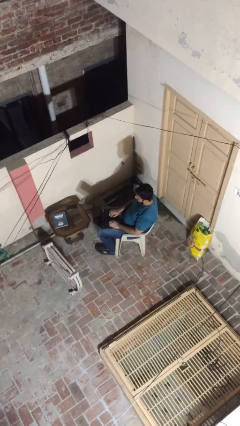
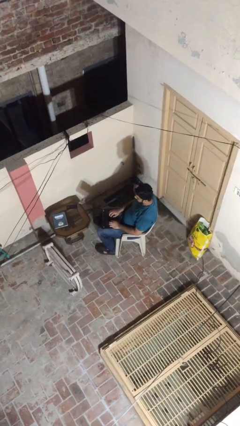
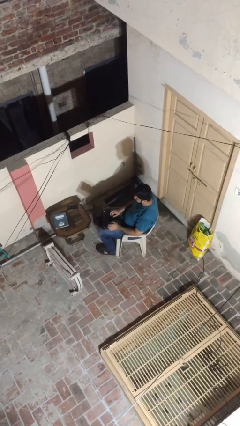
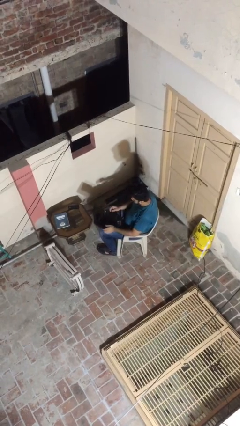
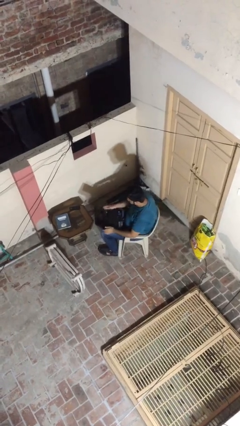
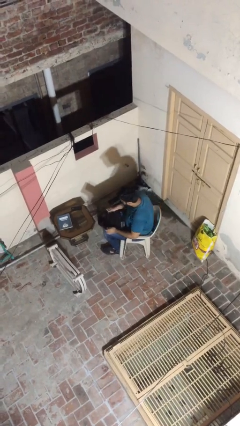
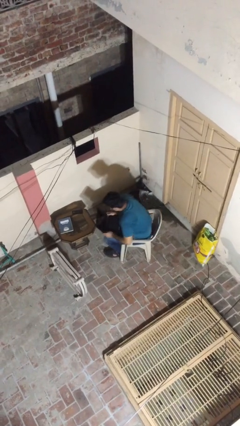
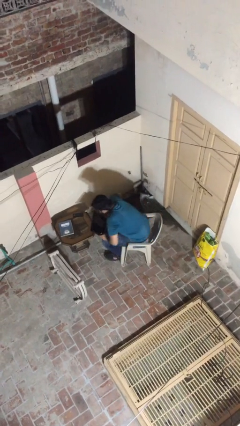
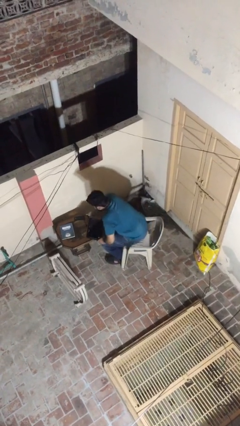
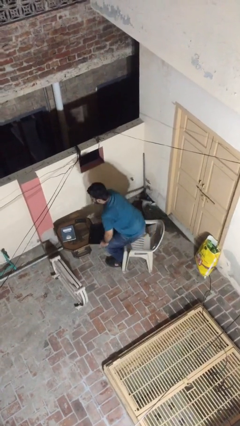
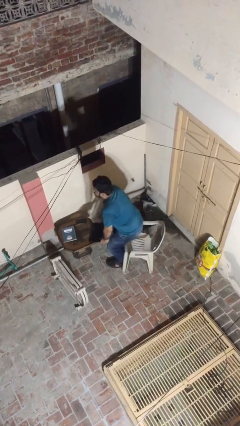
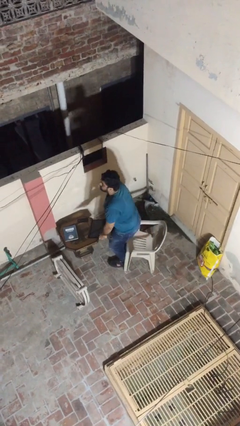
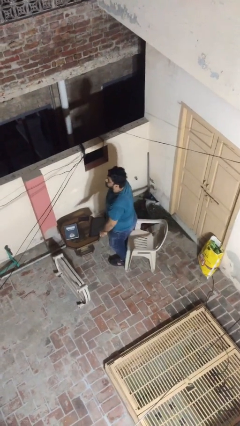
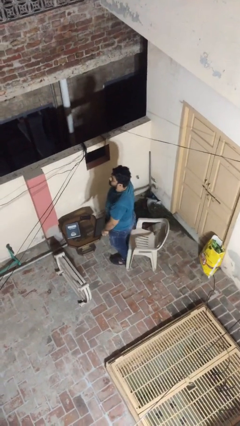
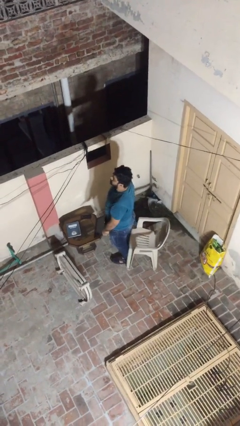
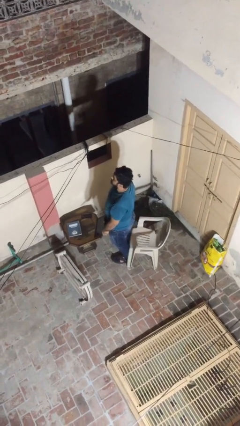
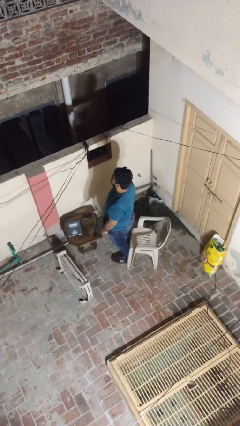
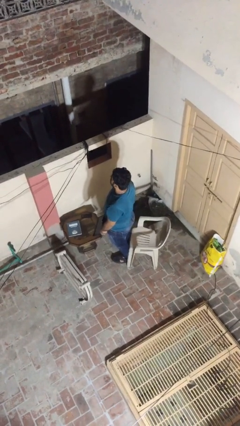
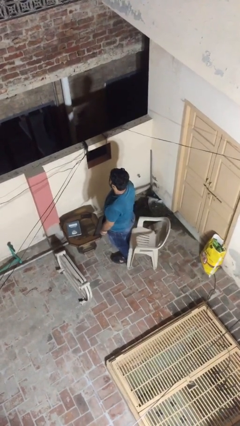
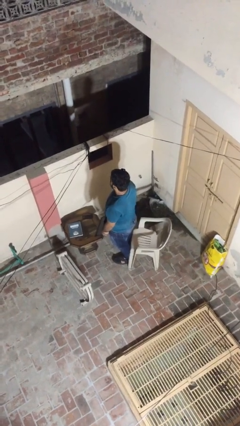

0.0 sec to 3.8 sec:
person stands up

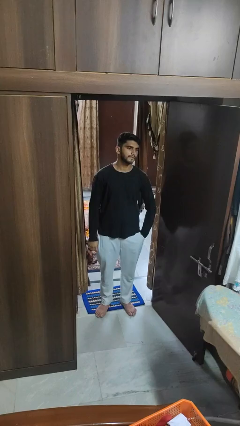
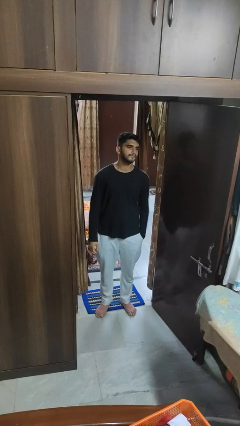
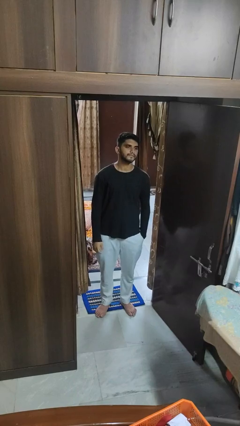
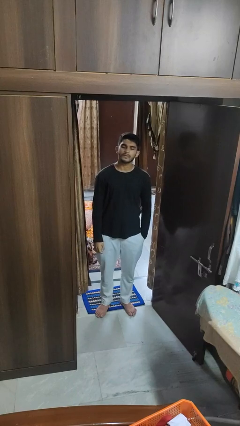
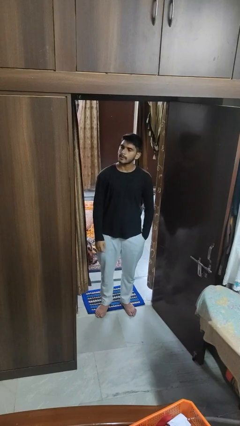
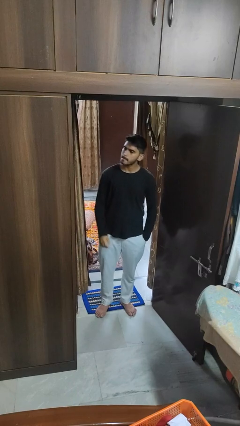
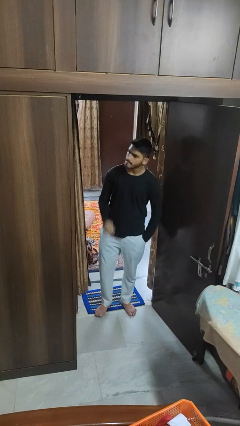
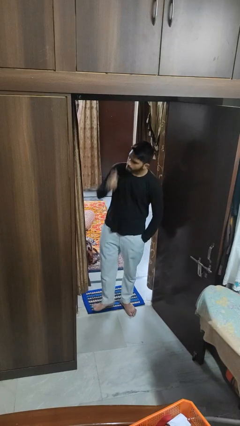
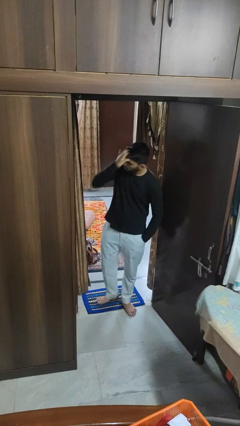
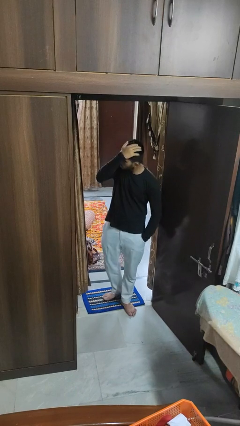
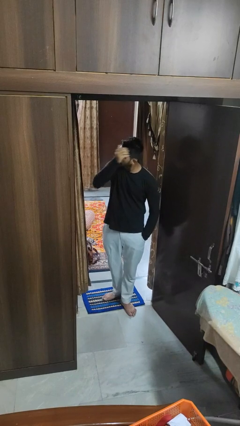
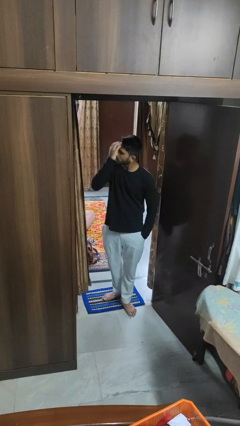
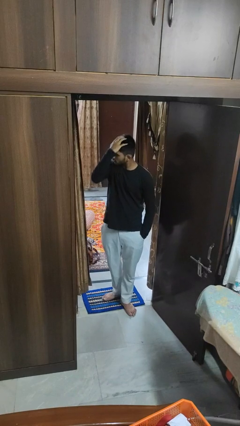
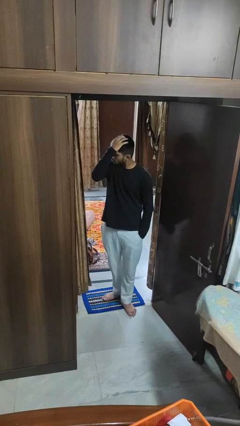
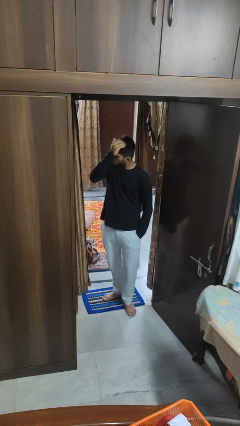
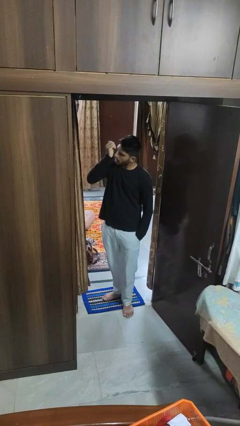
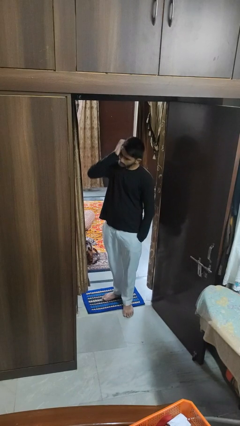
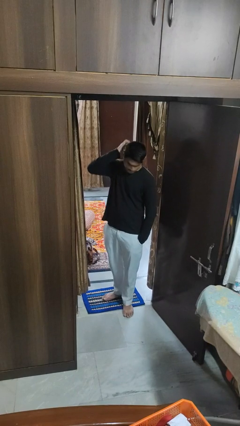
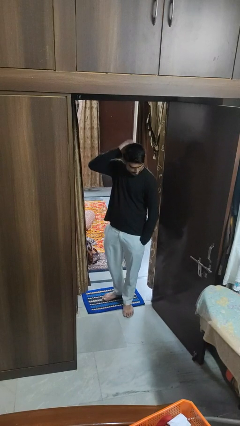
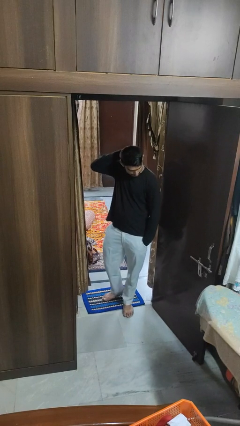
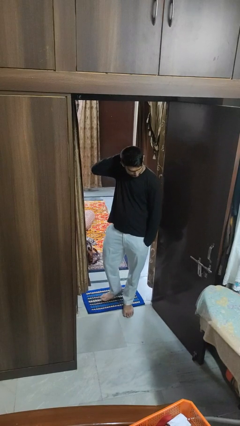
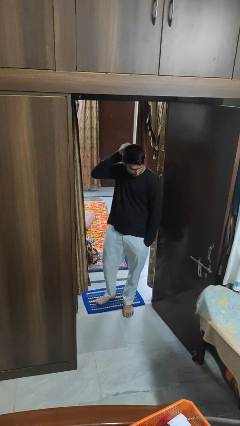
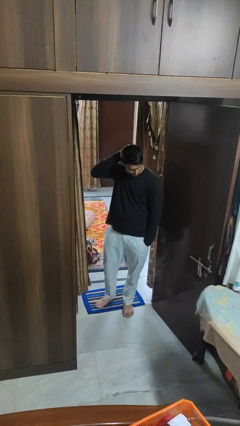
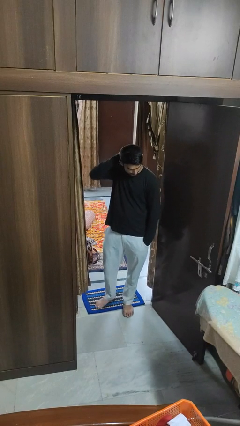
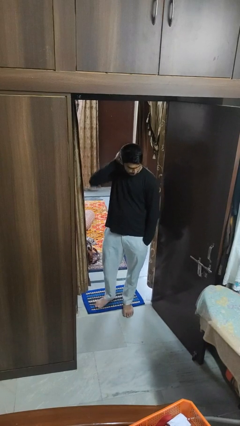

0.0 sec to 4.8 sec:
person strokes hair

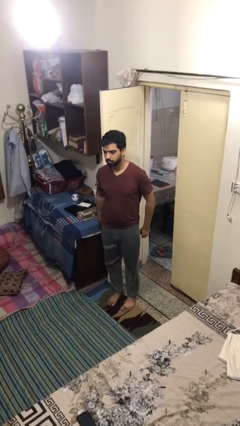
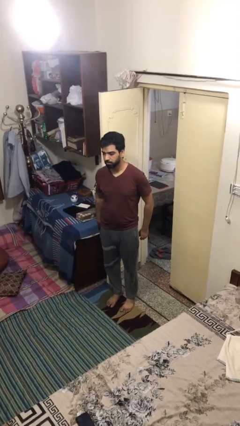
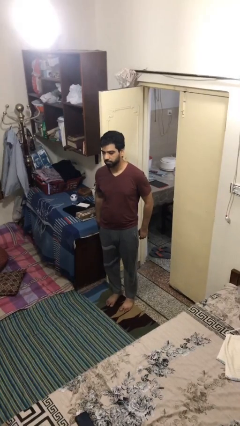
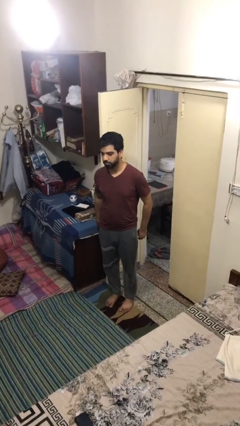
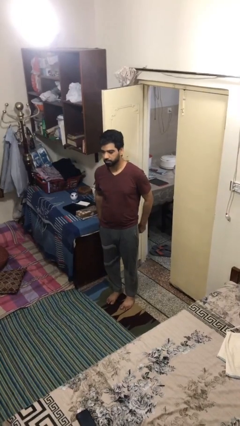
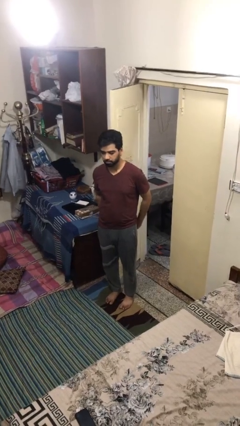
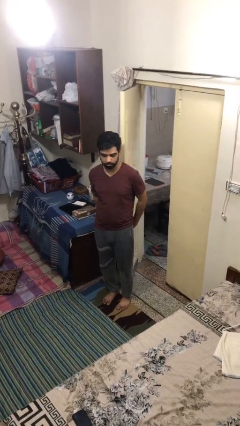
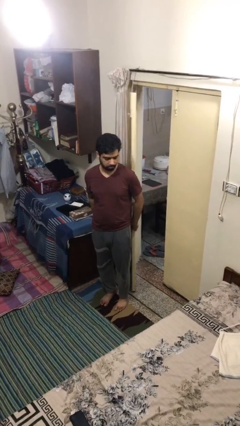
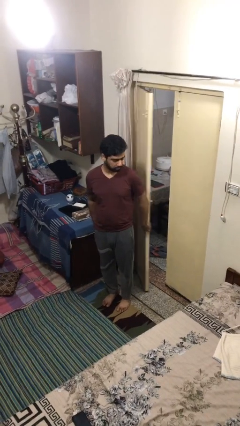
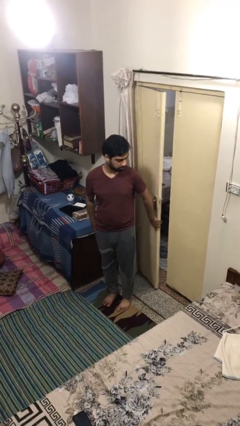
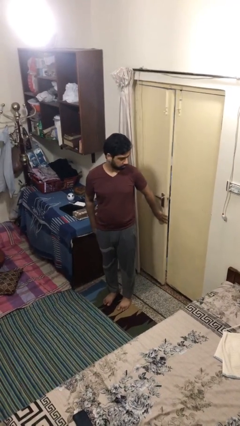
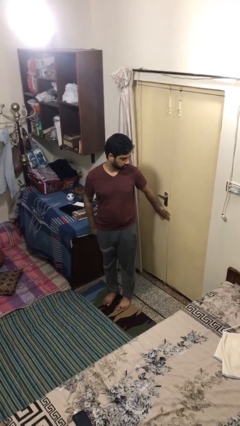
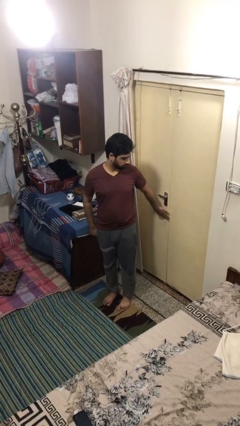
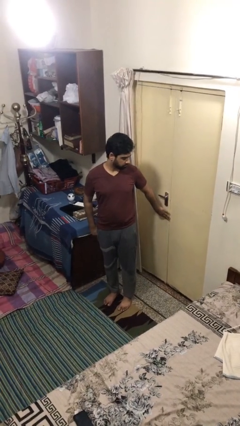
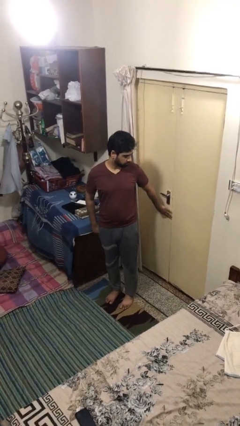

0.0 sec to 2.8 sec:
person closes facility door

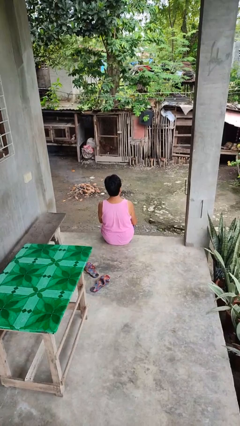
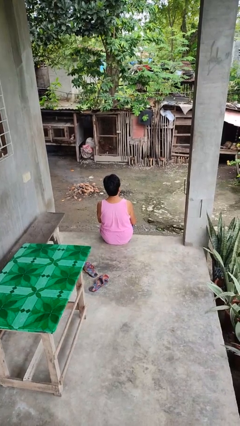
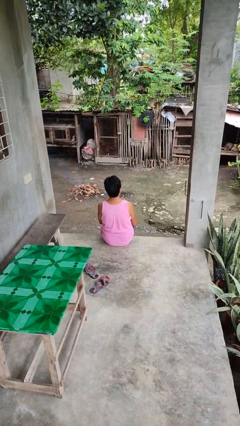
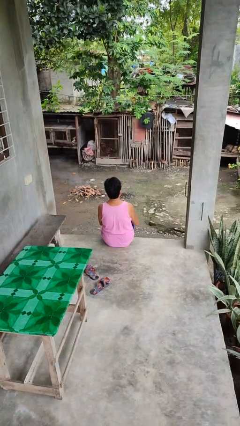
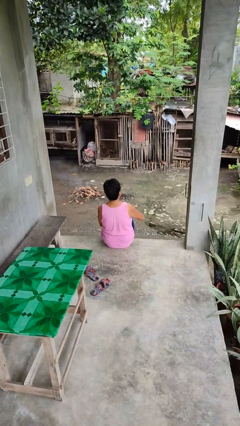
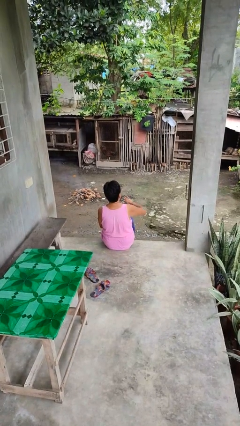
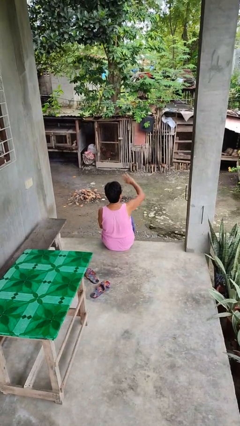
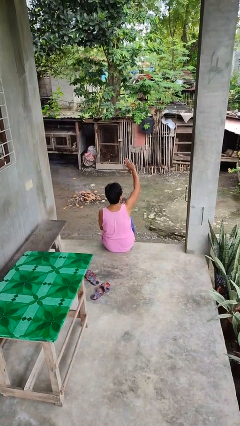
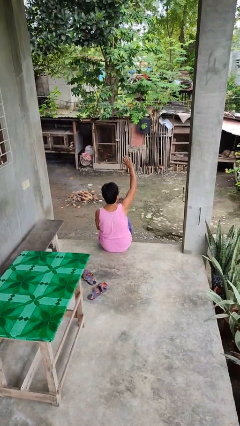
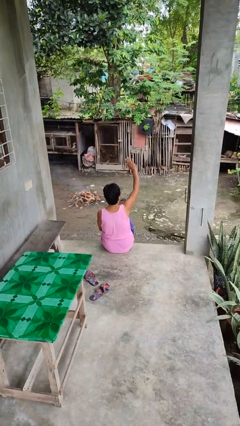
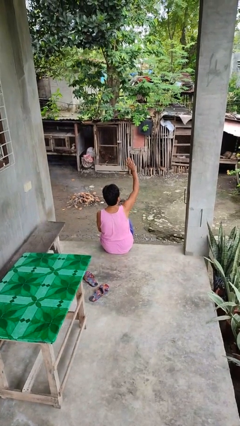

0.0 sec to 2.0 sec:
person gestures swipe up

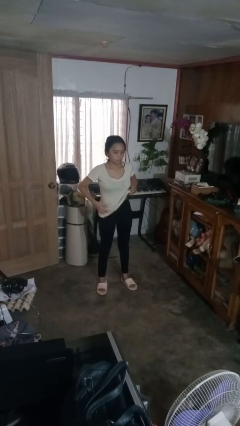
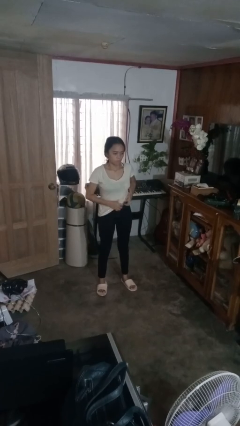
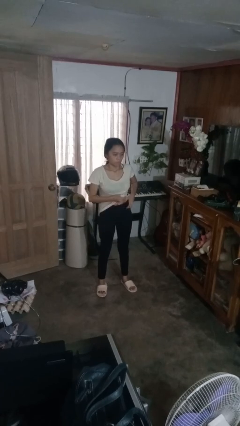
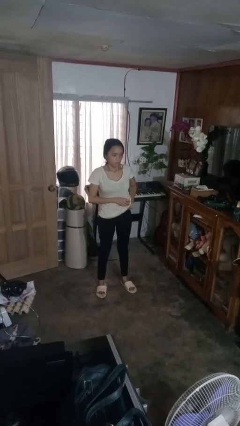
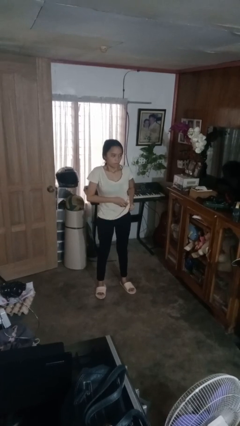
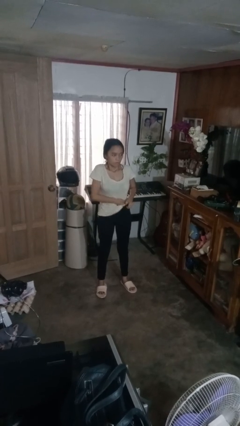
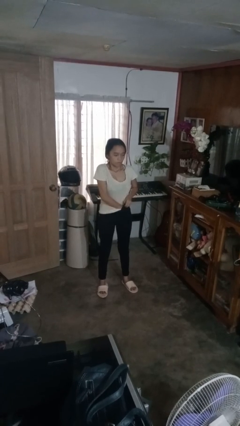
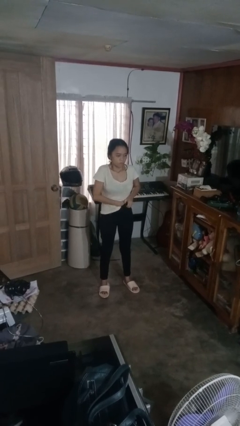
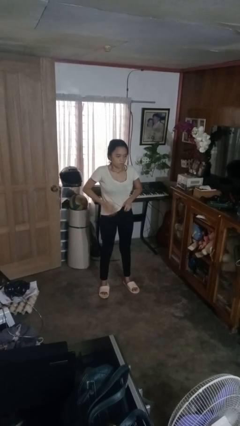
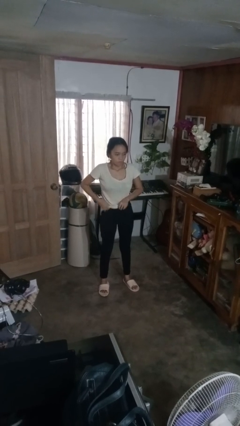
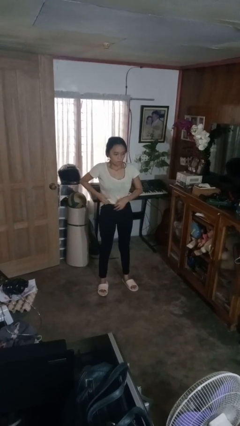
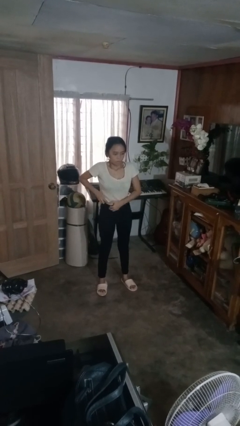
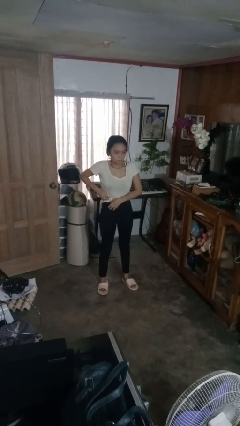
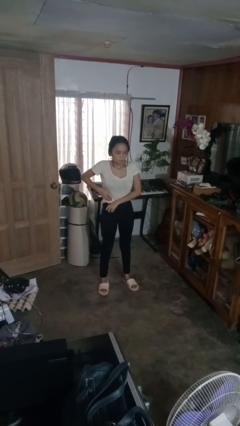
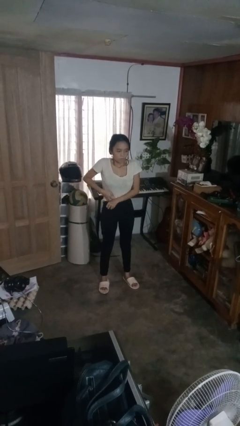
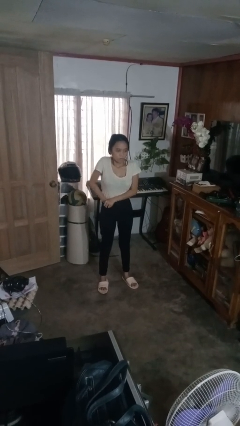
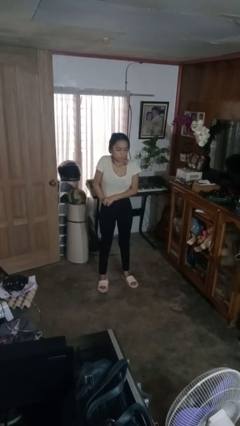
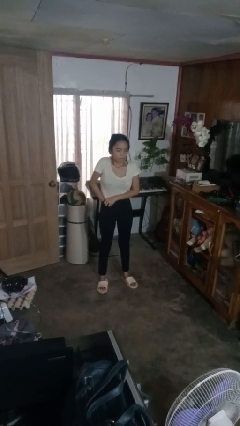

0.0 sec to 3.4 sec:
person tucks in shirt

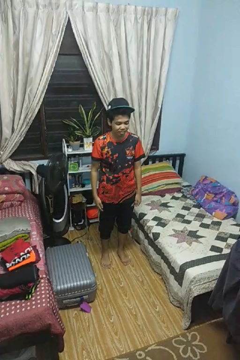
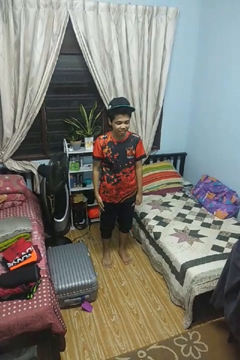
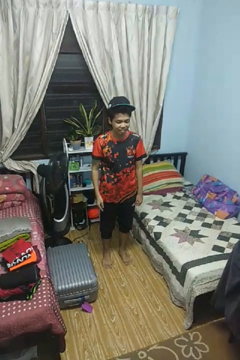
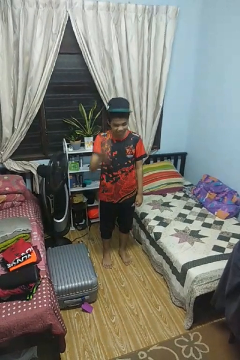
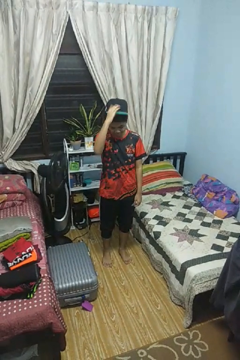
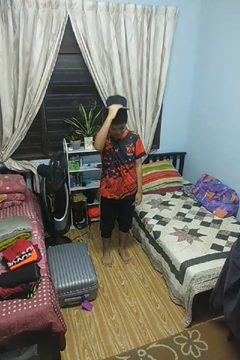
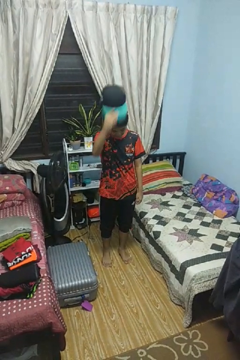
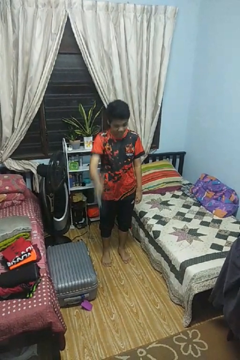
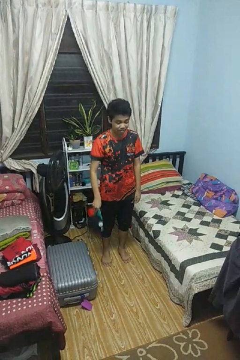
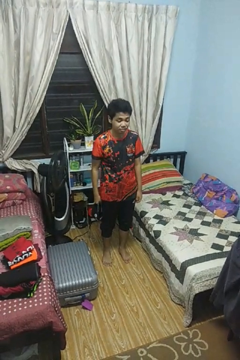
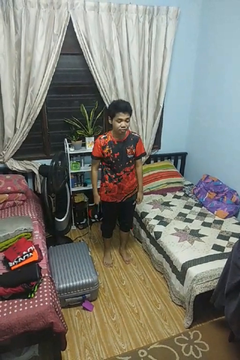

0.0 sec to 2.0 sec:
person takes off hat
